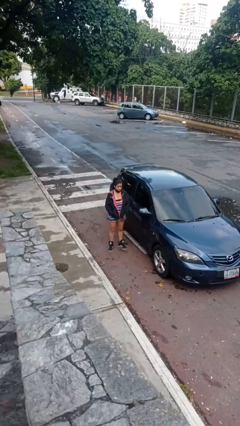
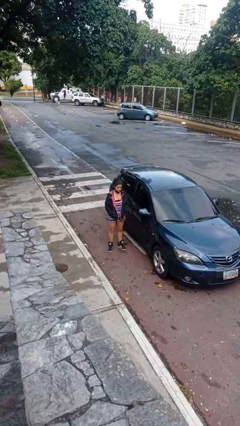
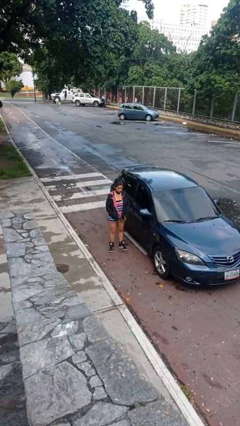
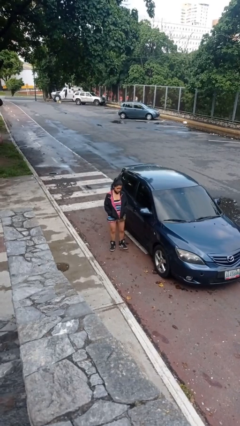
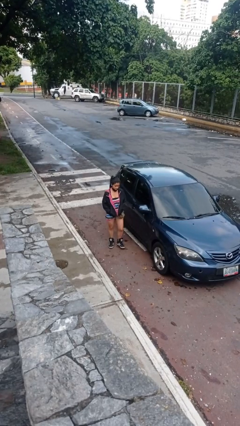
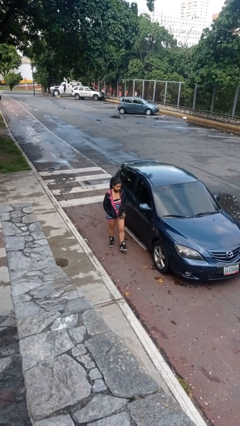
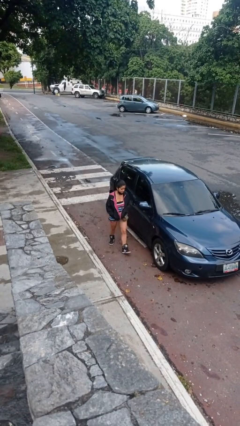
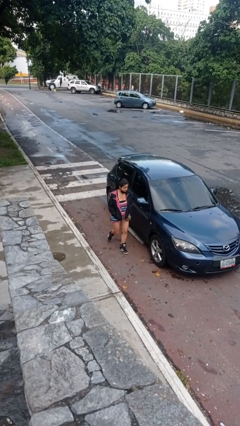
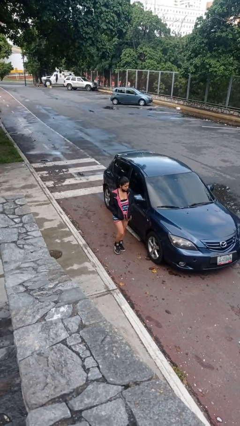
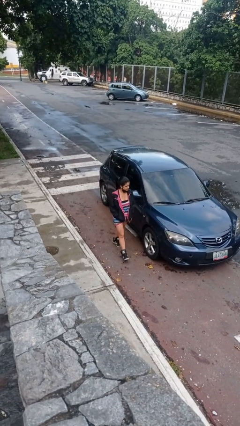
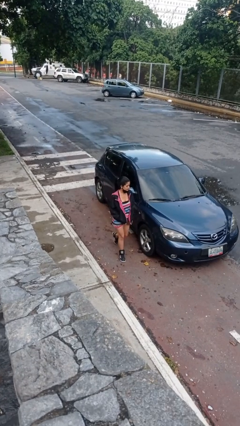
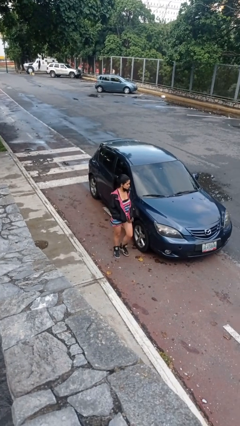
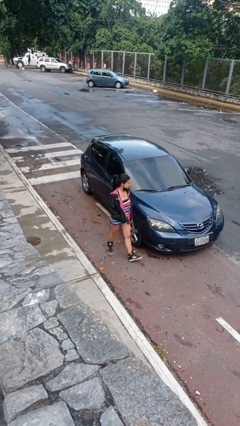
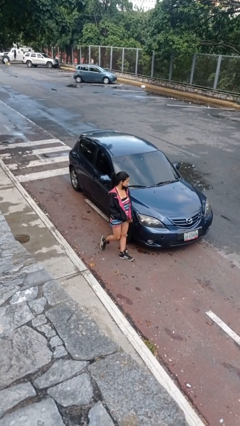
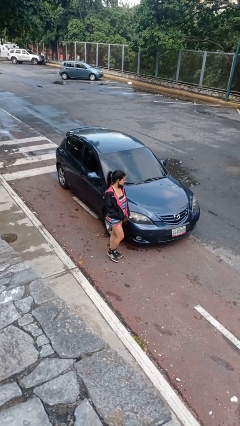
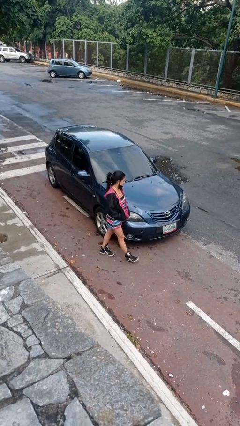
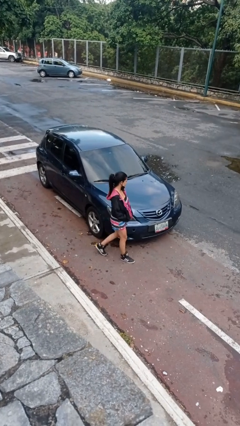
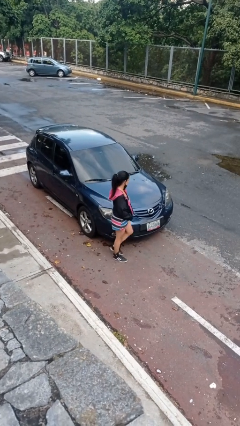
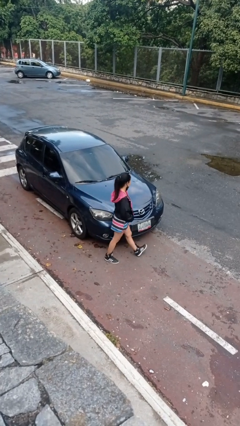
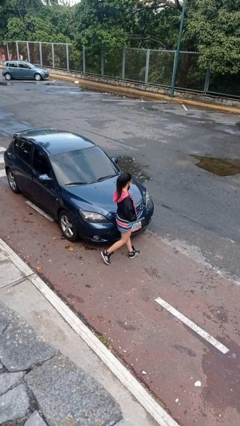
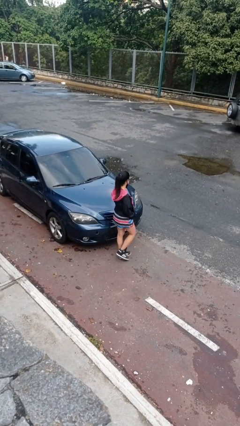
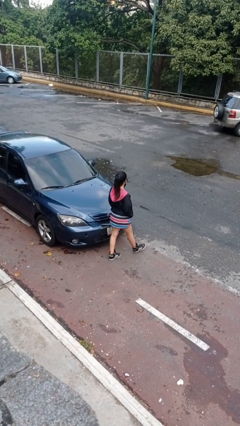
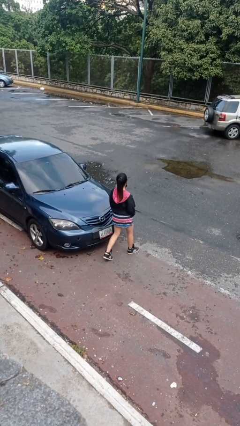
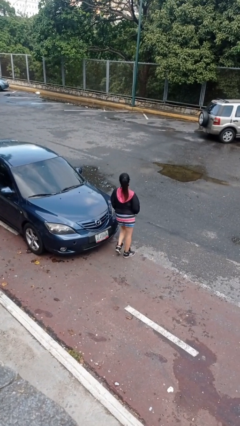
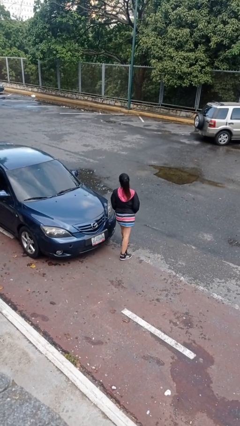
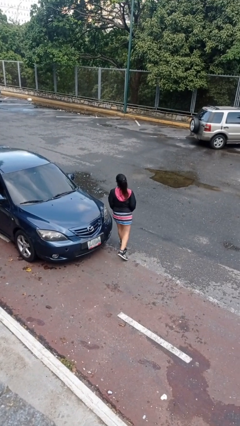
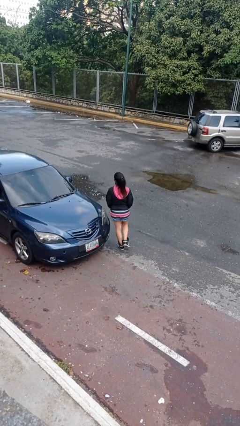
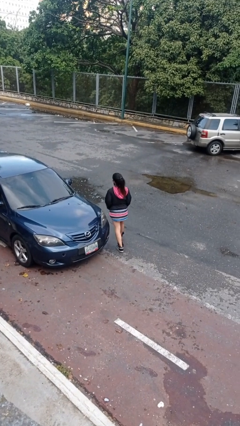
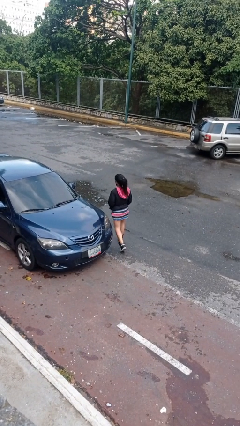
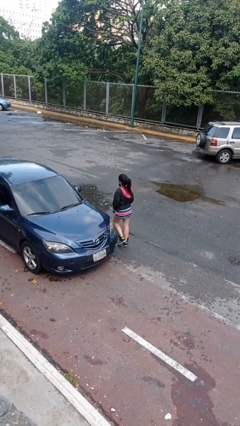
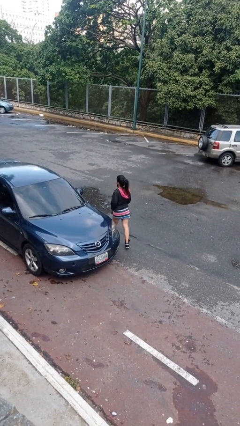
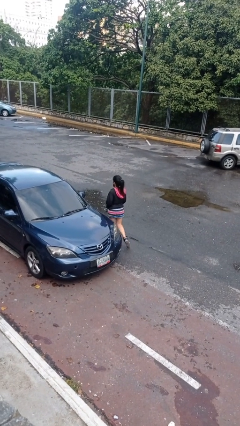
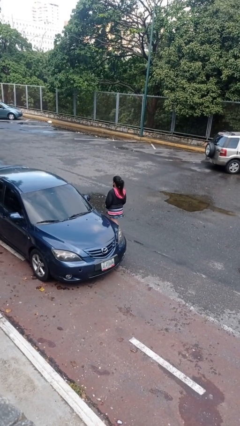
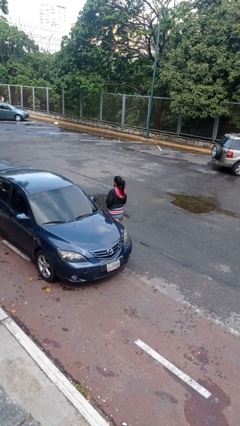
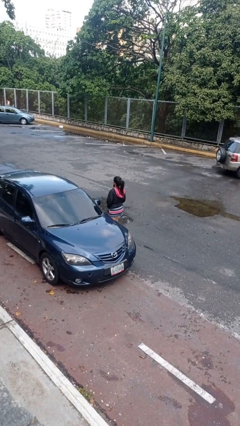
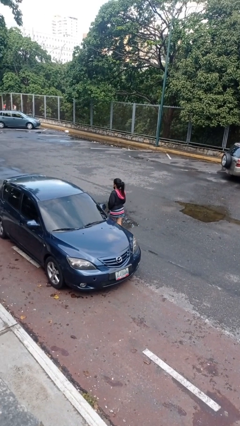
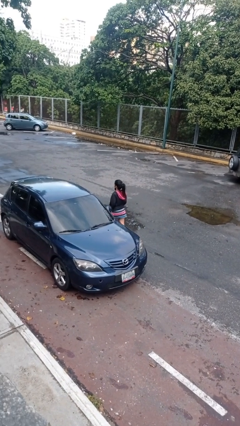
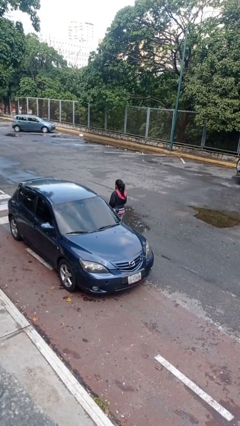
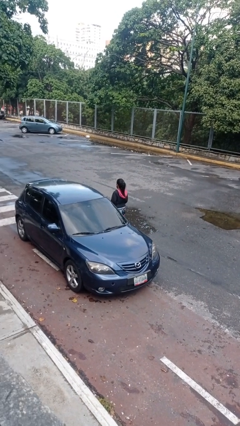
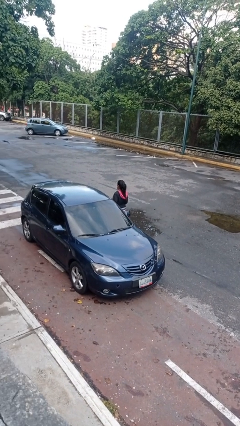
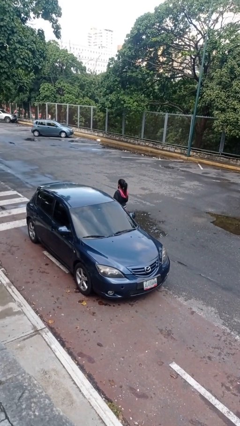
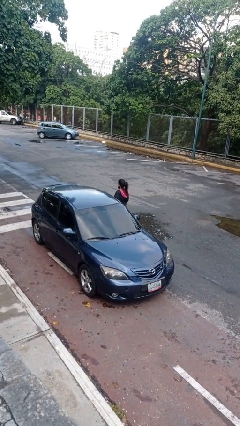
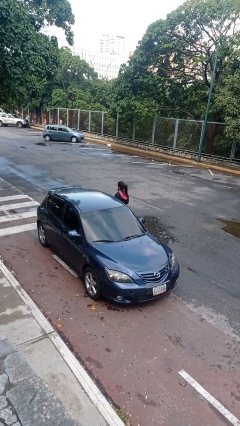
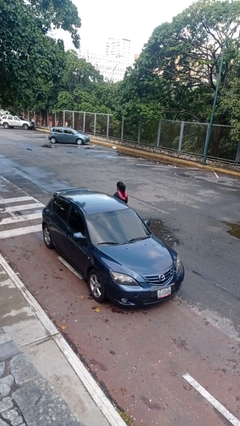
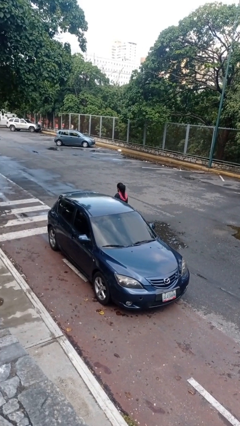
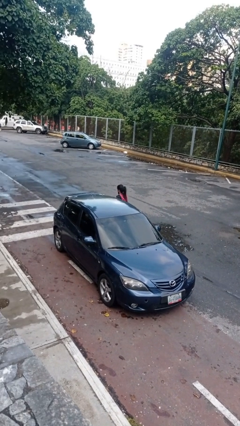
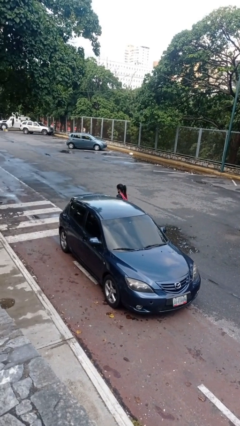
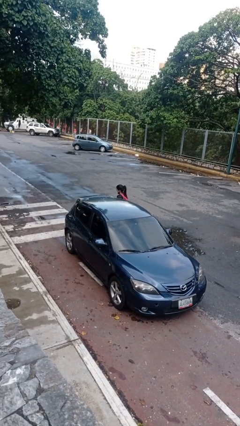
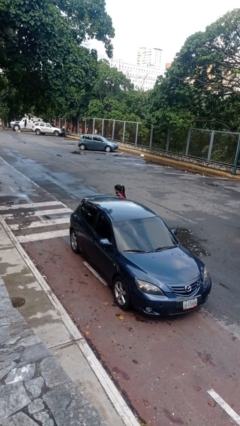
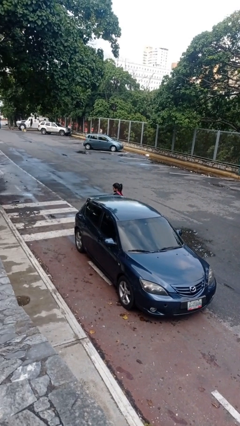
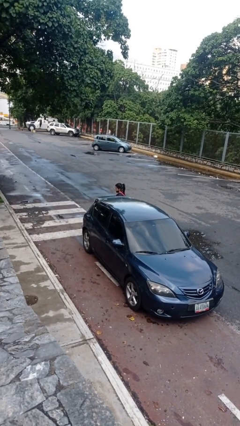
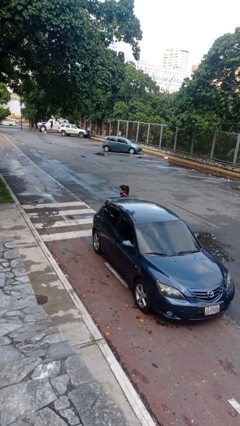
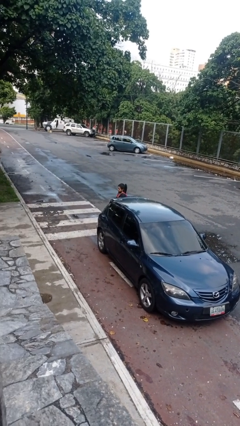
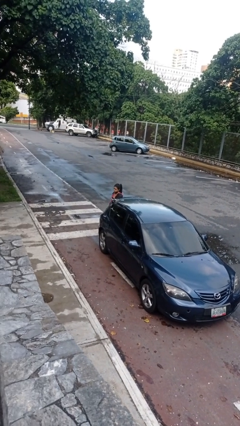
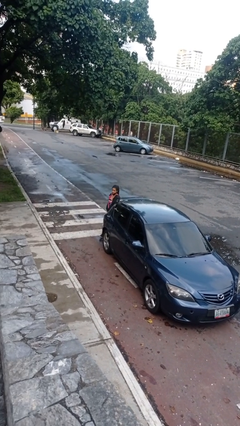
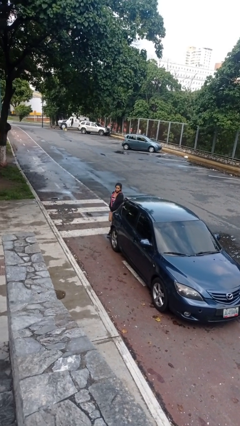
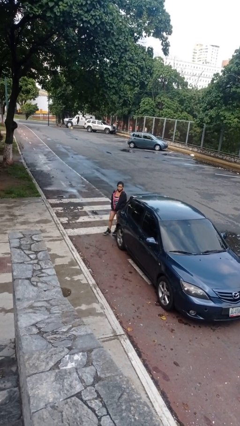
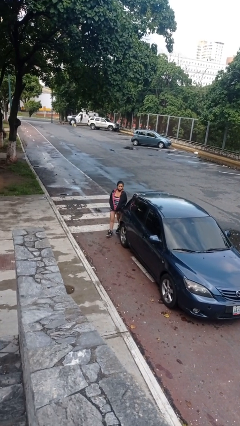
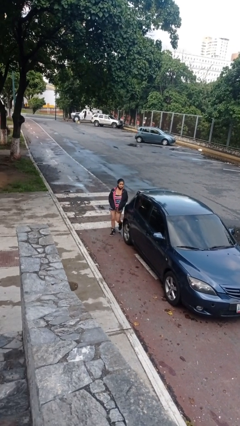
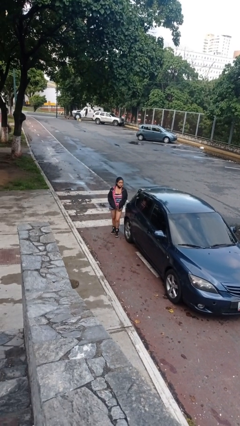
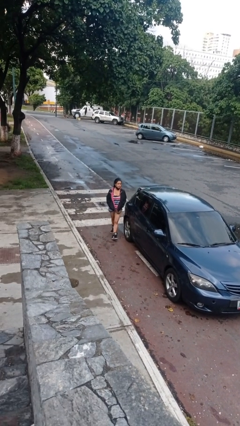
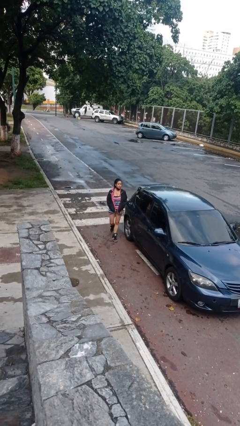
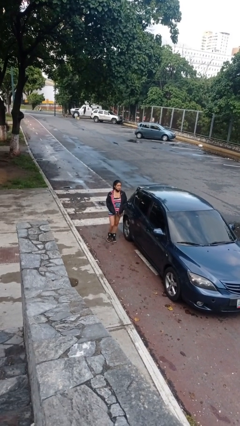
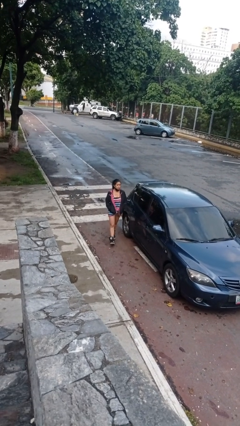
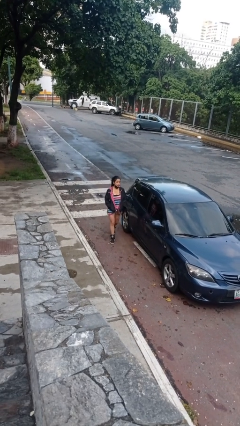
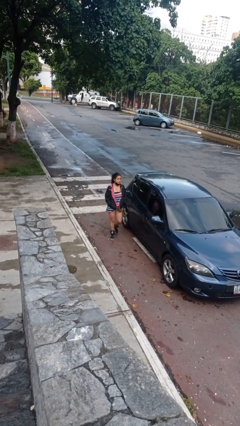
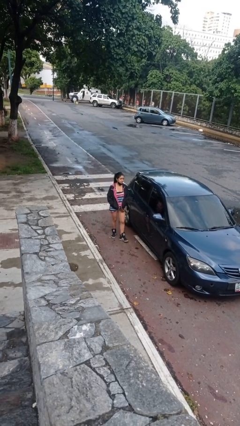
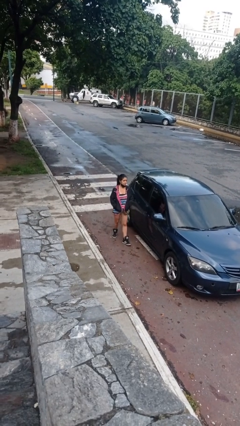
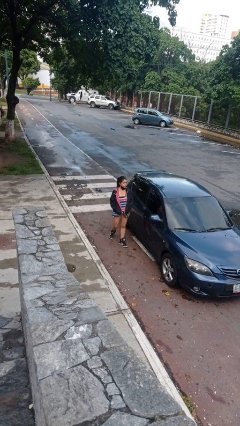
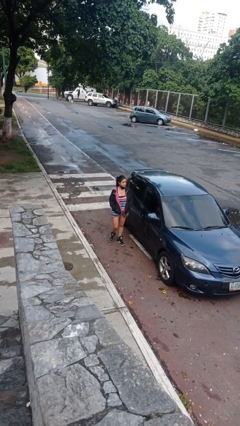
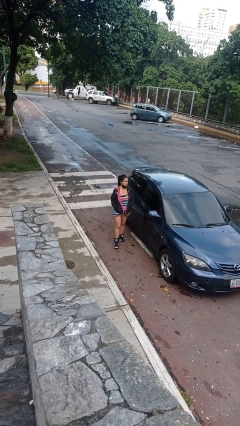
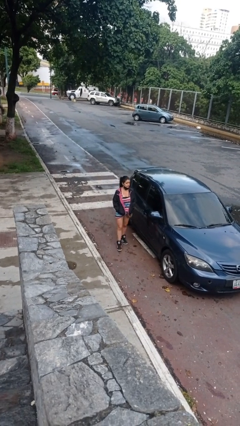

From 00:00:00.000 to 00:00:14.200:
person walks around car

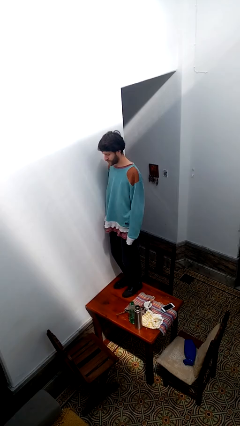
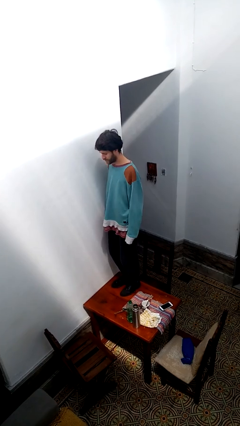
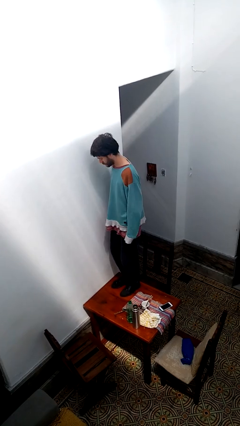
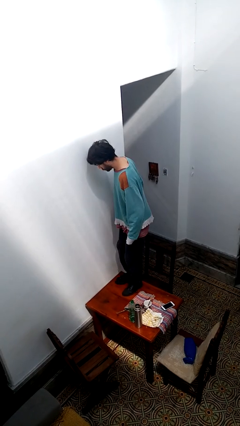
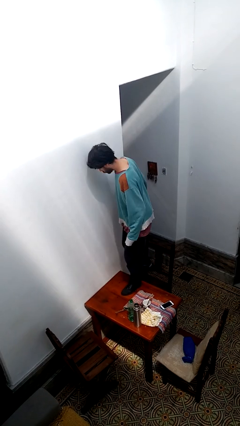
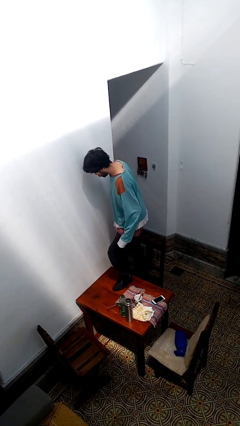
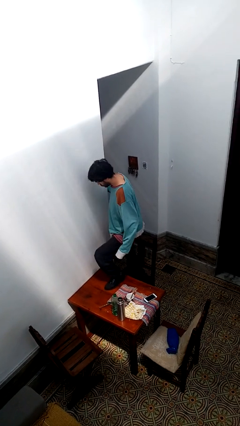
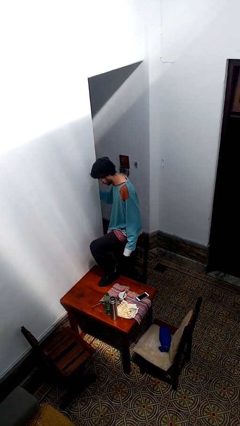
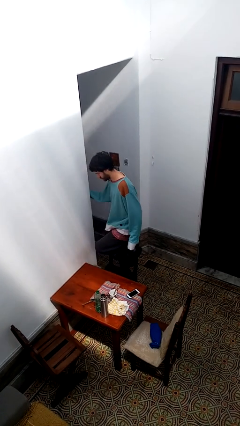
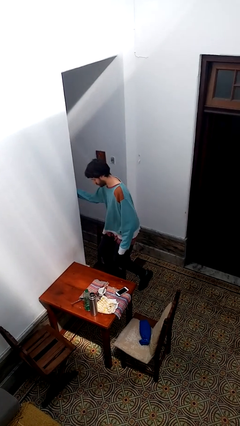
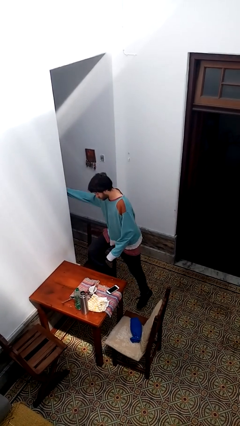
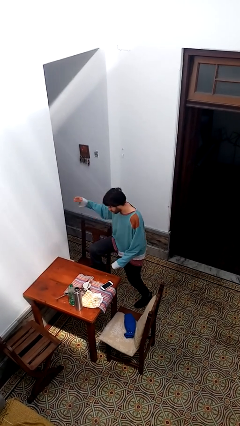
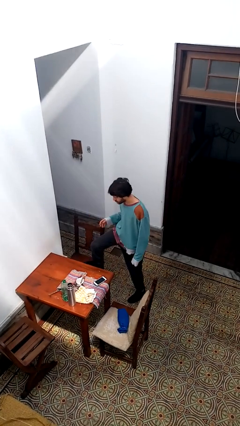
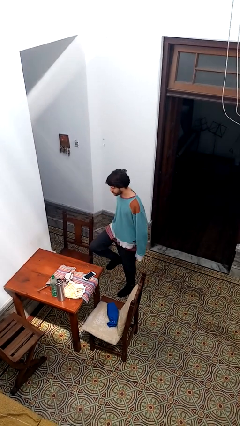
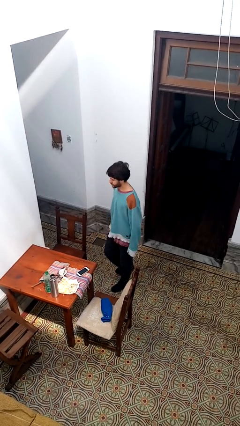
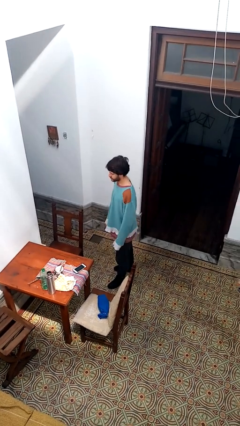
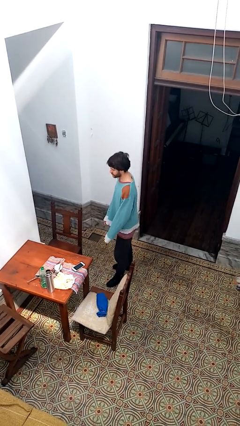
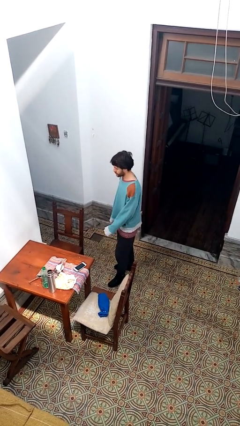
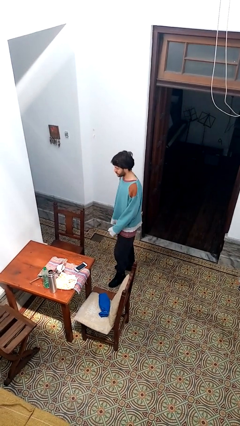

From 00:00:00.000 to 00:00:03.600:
person climbs off table

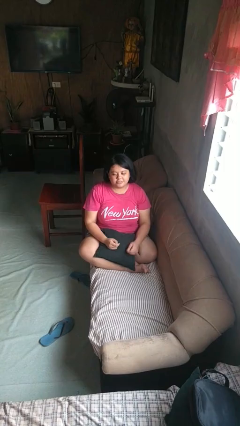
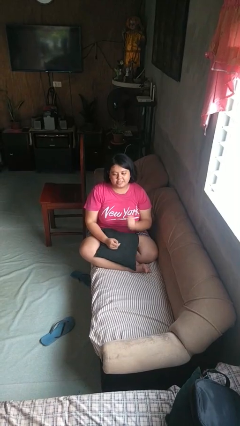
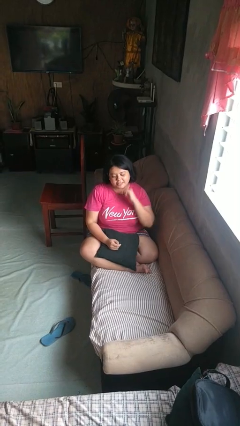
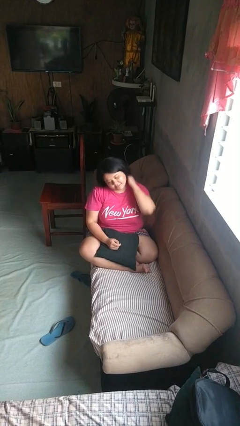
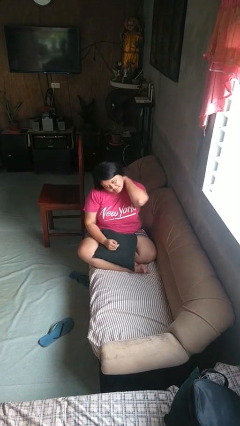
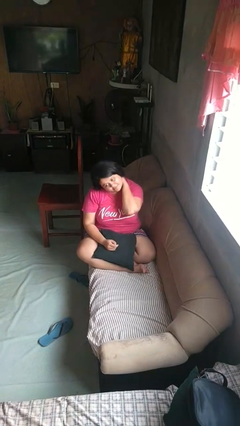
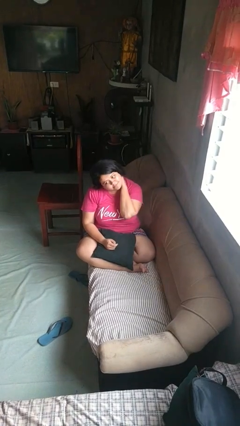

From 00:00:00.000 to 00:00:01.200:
person rubs neck
